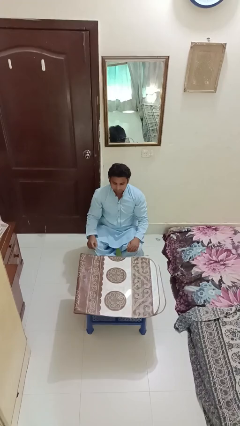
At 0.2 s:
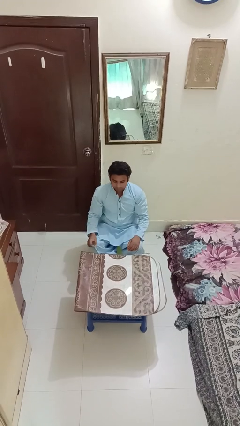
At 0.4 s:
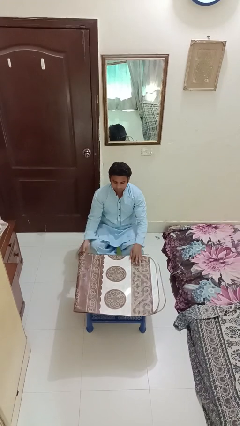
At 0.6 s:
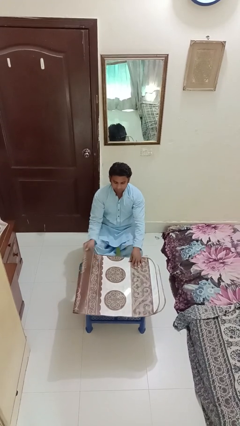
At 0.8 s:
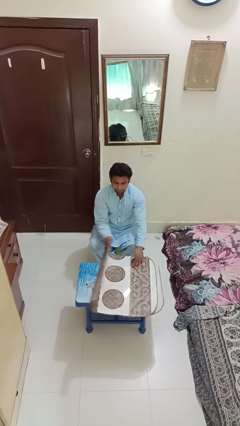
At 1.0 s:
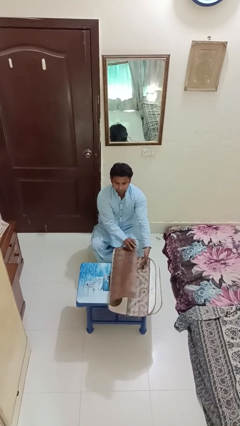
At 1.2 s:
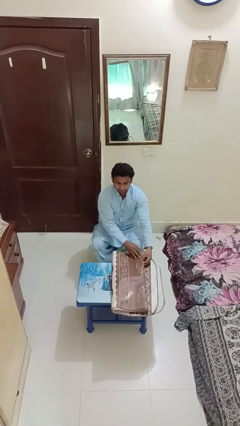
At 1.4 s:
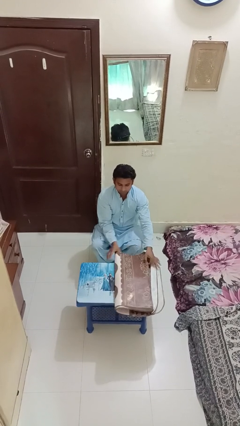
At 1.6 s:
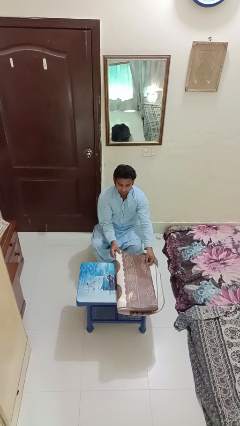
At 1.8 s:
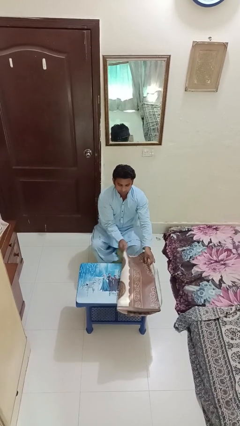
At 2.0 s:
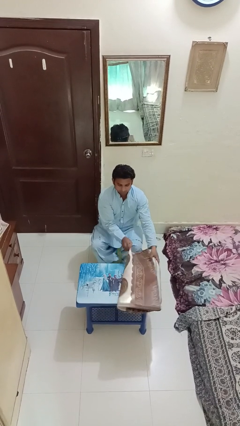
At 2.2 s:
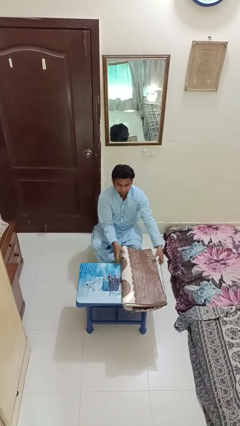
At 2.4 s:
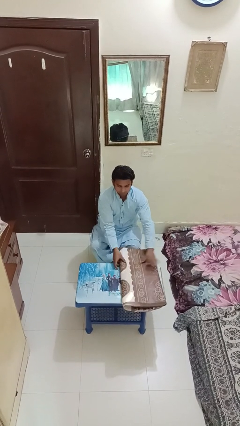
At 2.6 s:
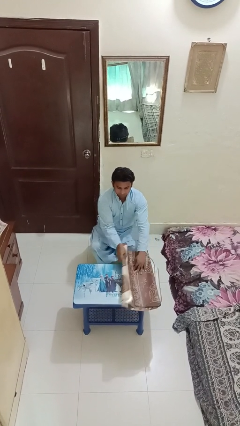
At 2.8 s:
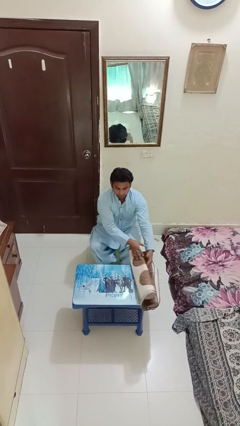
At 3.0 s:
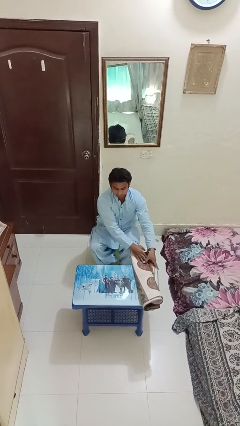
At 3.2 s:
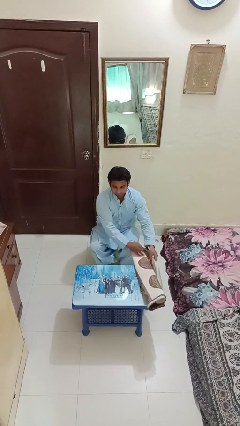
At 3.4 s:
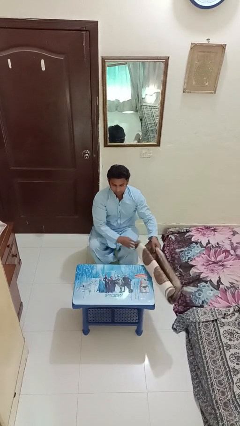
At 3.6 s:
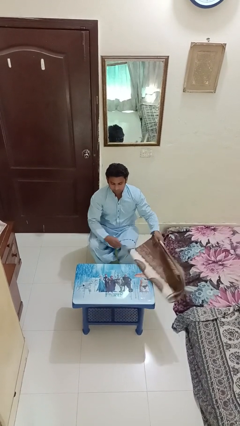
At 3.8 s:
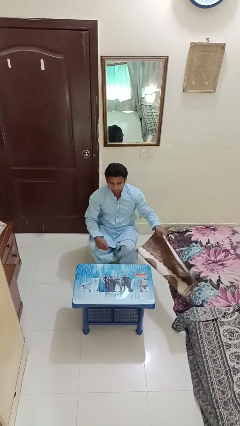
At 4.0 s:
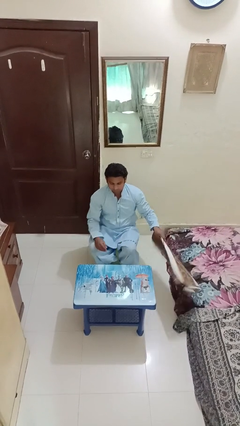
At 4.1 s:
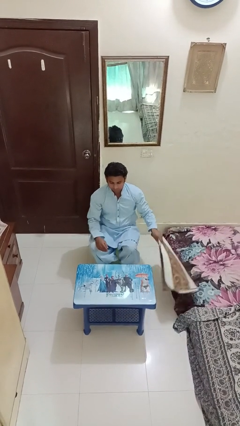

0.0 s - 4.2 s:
person folds tablecloth

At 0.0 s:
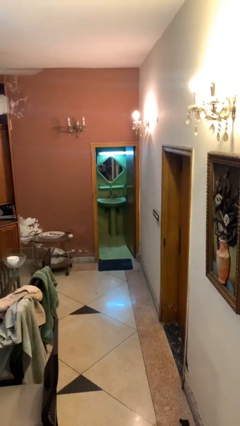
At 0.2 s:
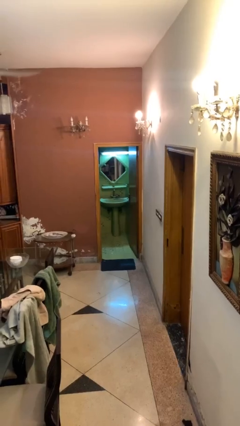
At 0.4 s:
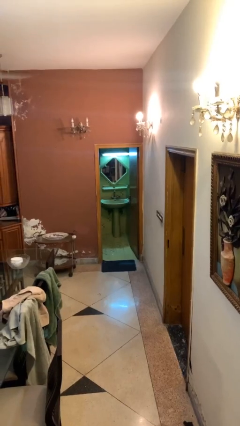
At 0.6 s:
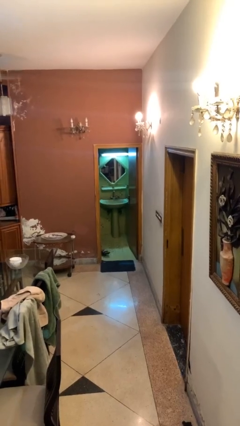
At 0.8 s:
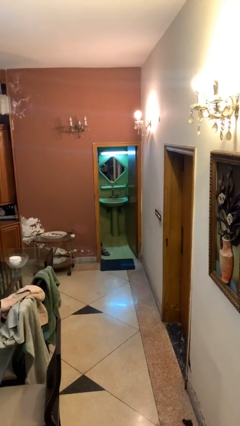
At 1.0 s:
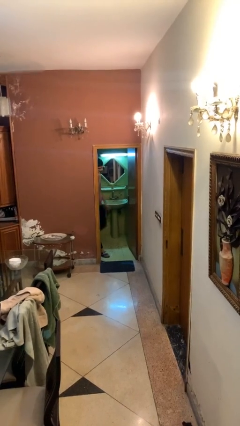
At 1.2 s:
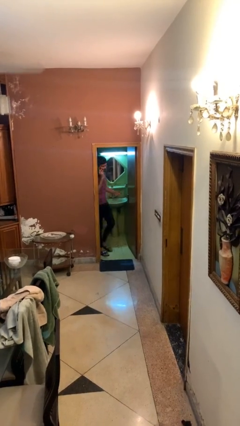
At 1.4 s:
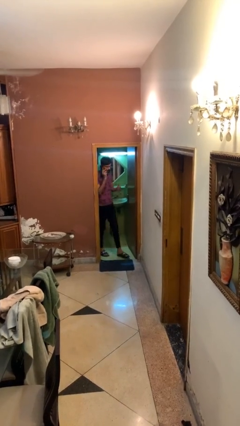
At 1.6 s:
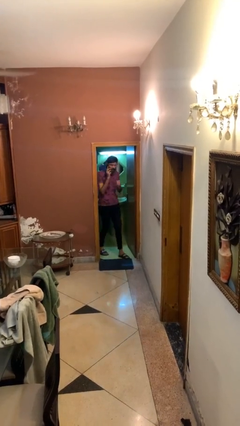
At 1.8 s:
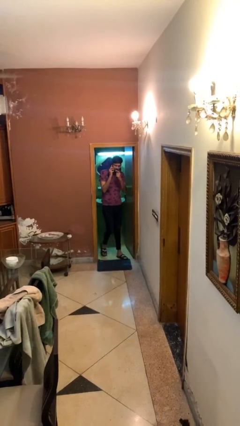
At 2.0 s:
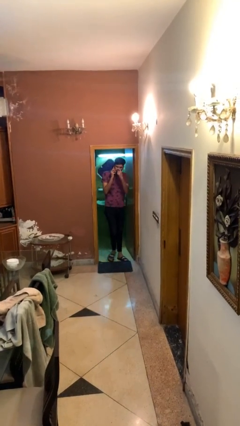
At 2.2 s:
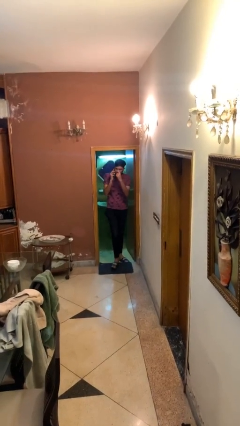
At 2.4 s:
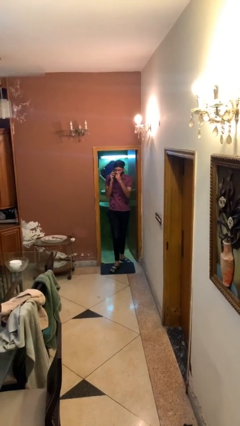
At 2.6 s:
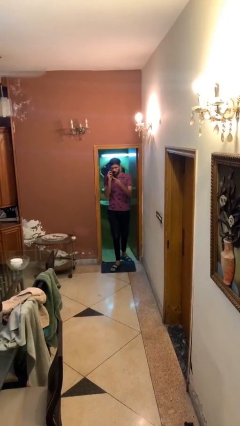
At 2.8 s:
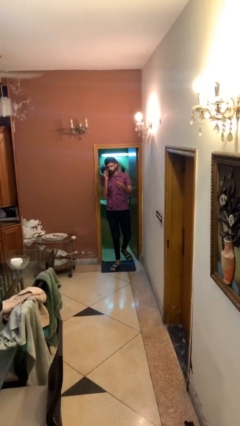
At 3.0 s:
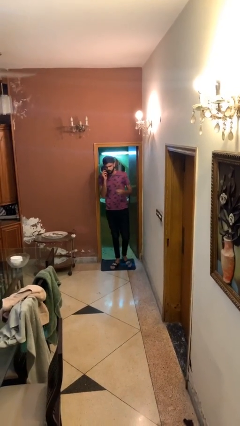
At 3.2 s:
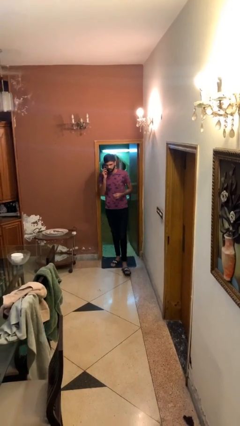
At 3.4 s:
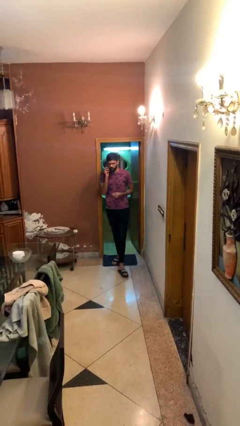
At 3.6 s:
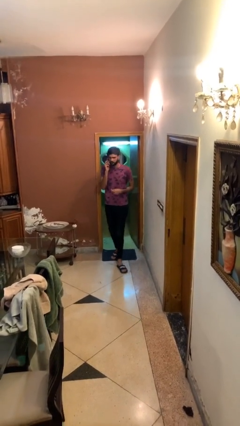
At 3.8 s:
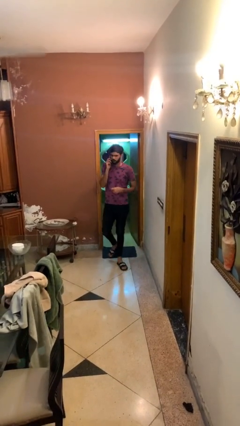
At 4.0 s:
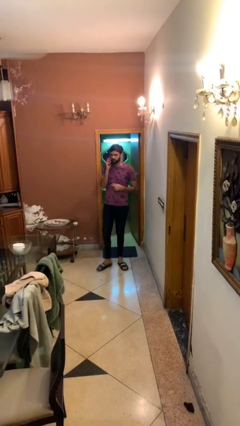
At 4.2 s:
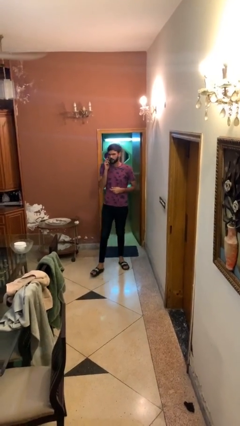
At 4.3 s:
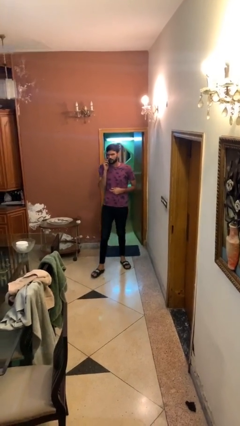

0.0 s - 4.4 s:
person enters scene through structure

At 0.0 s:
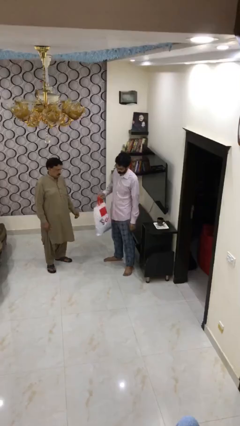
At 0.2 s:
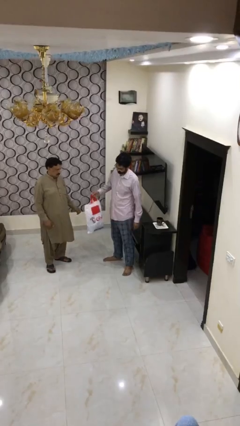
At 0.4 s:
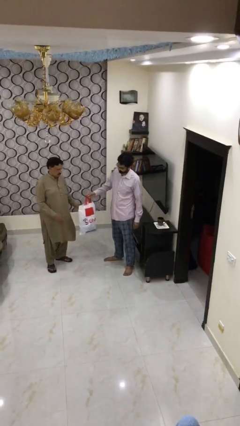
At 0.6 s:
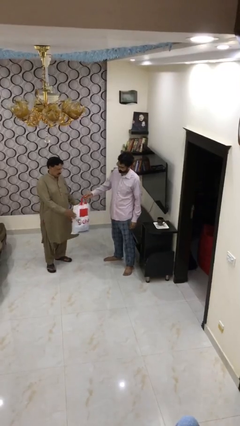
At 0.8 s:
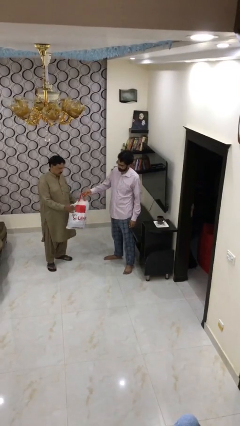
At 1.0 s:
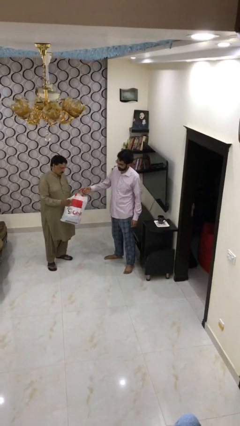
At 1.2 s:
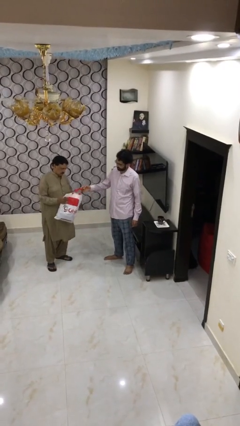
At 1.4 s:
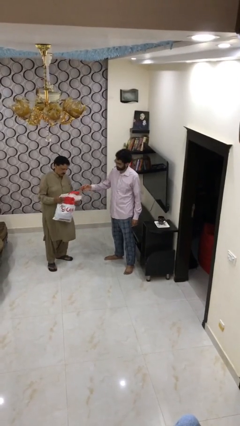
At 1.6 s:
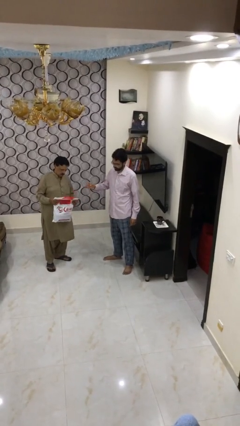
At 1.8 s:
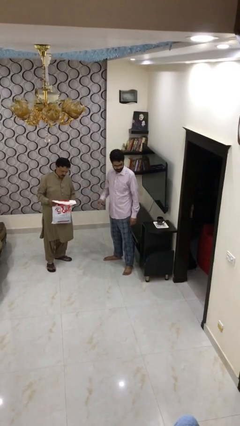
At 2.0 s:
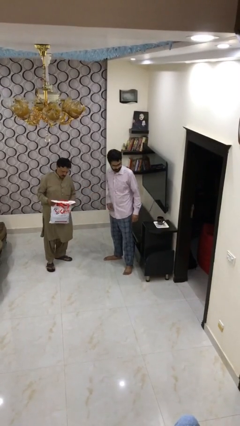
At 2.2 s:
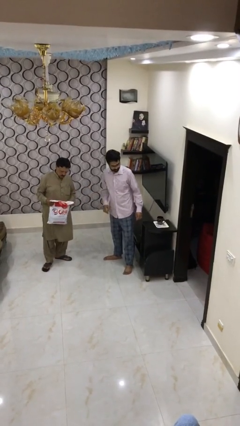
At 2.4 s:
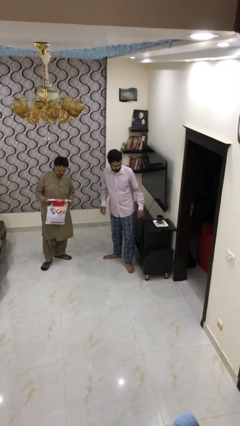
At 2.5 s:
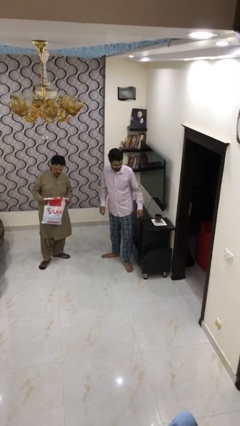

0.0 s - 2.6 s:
person transfers object to person

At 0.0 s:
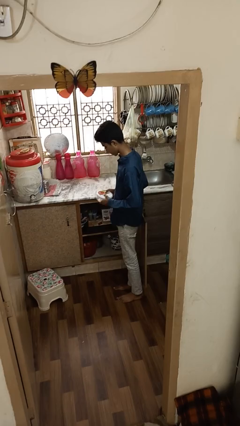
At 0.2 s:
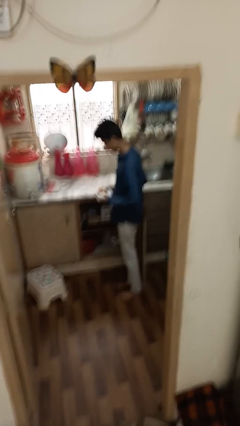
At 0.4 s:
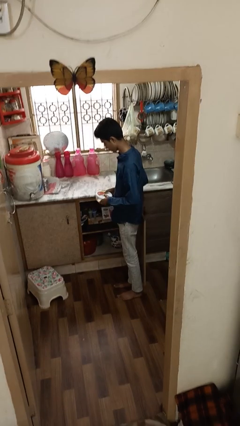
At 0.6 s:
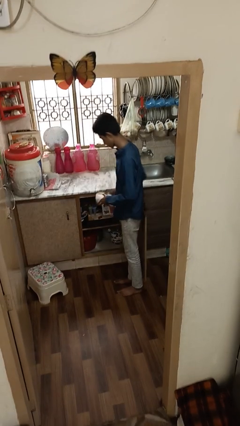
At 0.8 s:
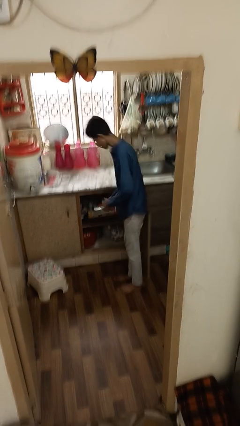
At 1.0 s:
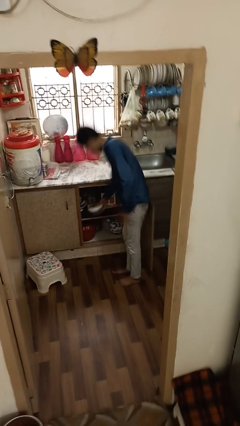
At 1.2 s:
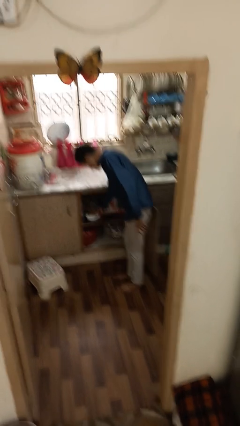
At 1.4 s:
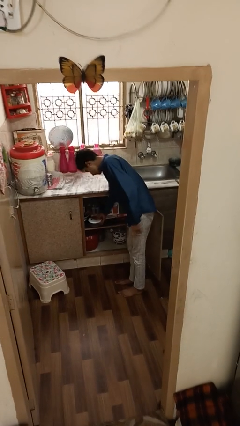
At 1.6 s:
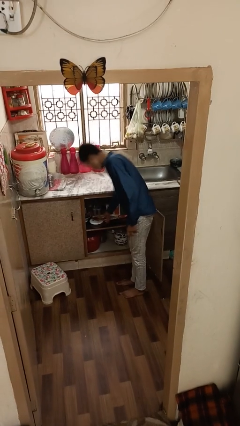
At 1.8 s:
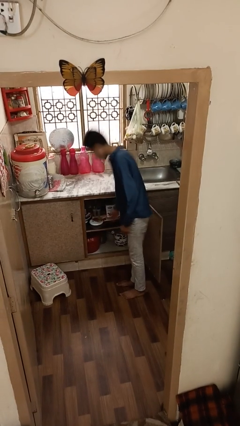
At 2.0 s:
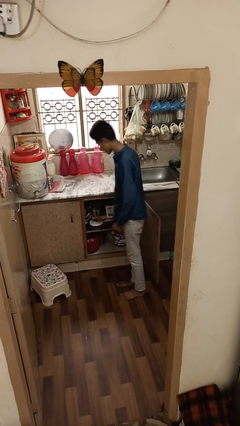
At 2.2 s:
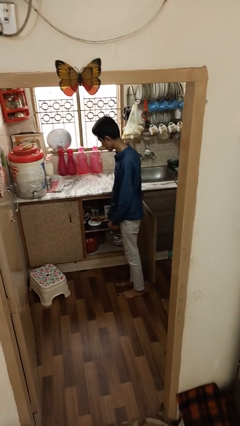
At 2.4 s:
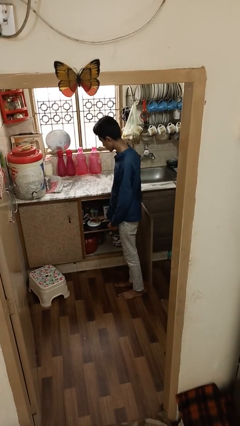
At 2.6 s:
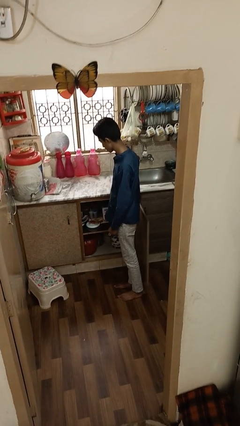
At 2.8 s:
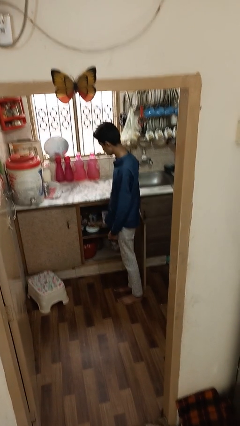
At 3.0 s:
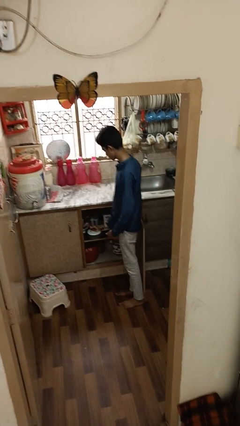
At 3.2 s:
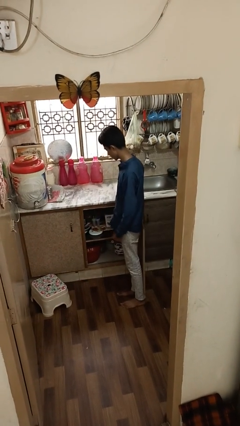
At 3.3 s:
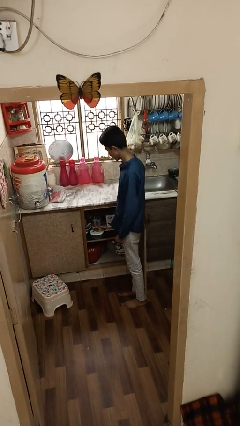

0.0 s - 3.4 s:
person puts down object into cabinet

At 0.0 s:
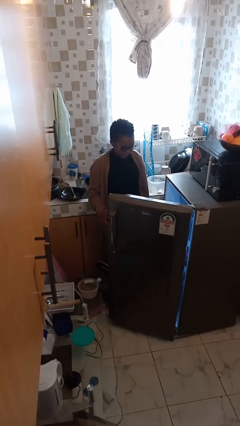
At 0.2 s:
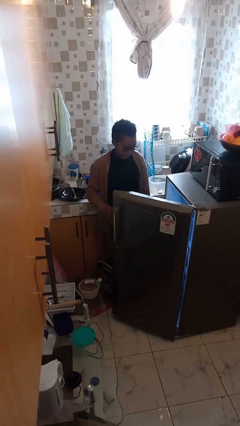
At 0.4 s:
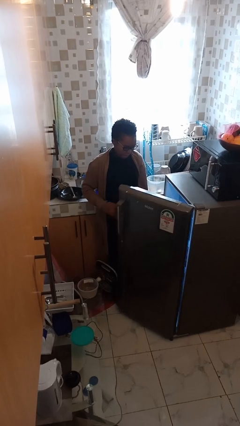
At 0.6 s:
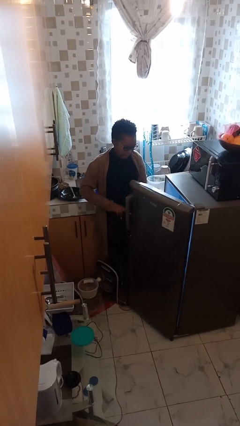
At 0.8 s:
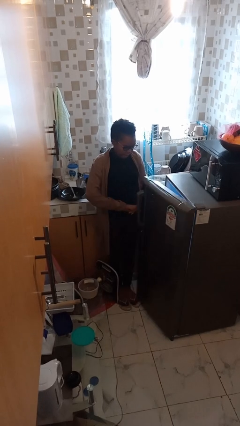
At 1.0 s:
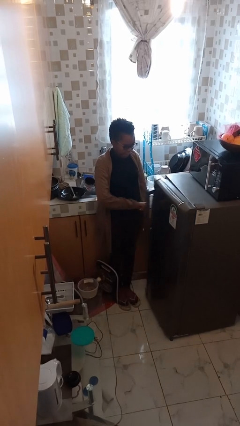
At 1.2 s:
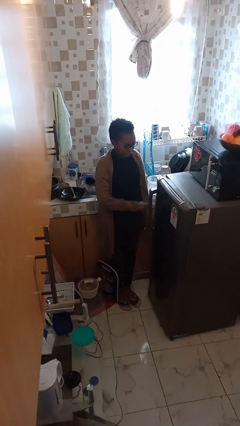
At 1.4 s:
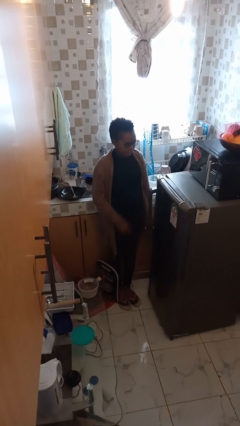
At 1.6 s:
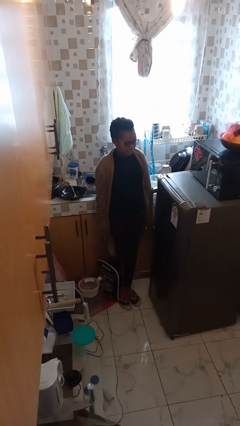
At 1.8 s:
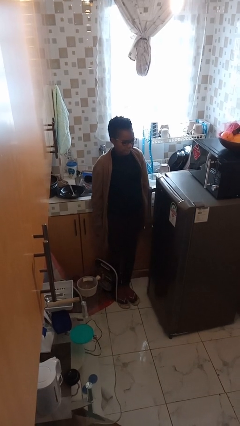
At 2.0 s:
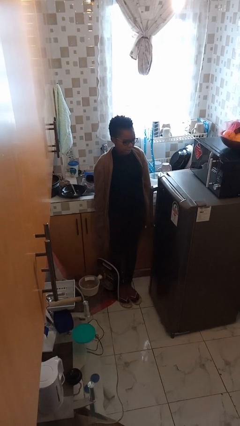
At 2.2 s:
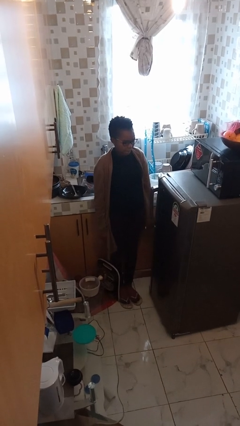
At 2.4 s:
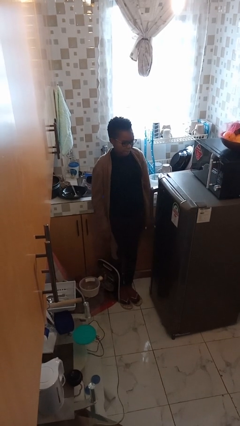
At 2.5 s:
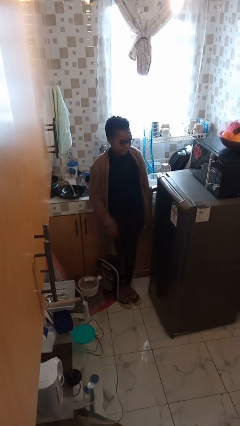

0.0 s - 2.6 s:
person closes refrigerator

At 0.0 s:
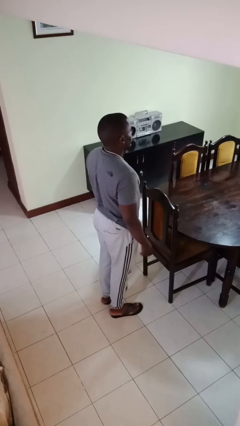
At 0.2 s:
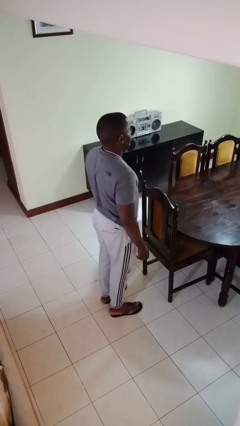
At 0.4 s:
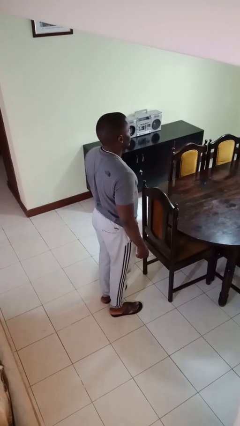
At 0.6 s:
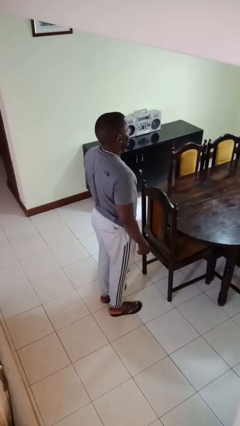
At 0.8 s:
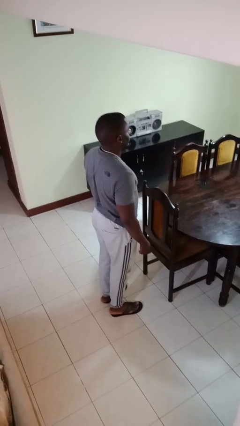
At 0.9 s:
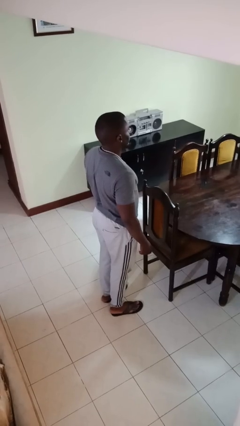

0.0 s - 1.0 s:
person pushes in chair
